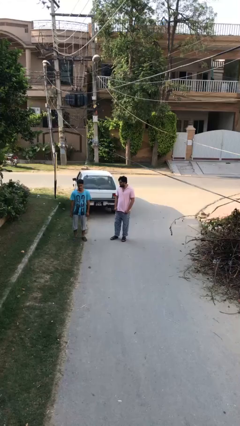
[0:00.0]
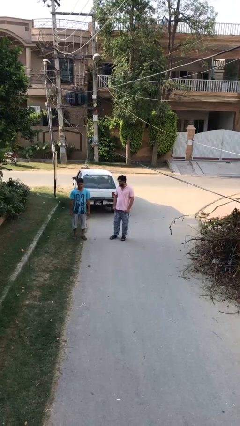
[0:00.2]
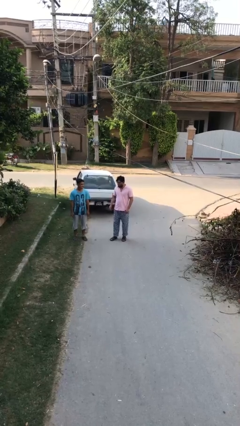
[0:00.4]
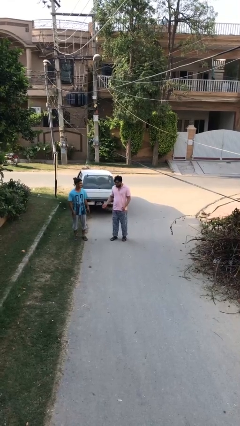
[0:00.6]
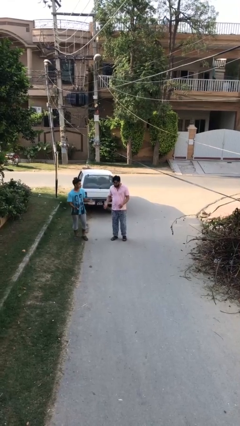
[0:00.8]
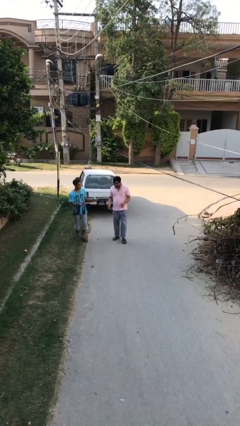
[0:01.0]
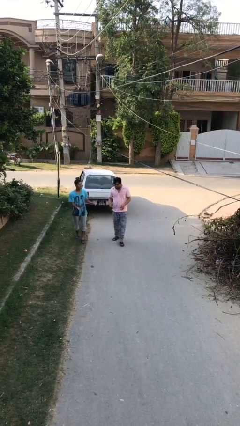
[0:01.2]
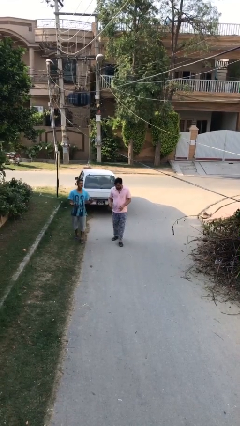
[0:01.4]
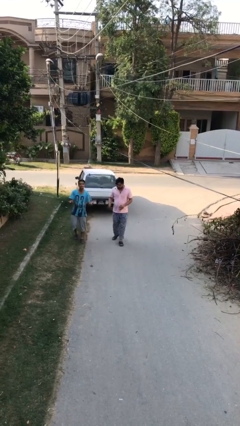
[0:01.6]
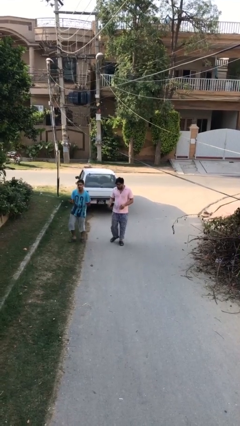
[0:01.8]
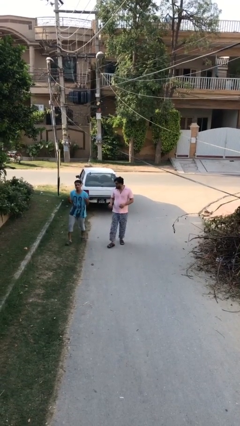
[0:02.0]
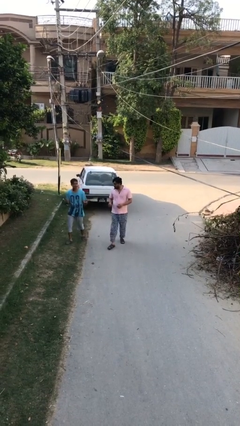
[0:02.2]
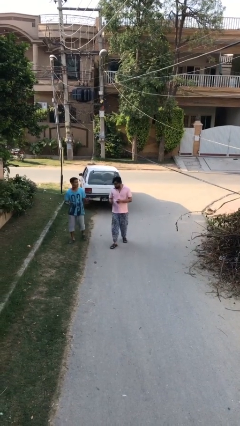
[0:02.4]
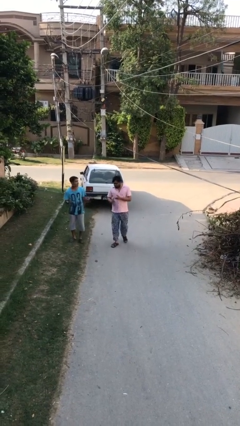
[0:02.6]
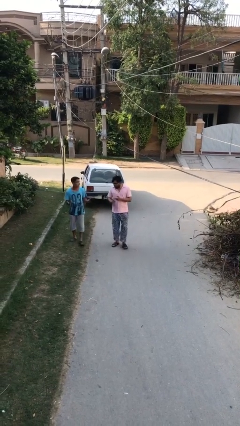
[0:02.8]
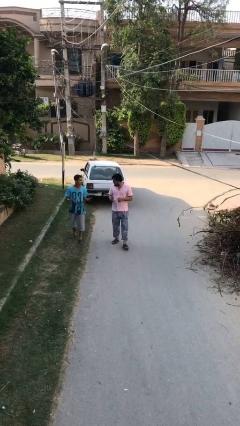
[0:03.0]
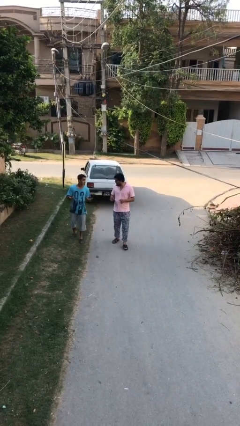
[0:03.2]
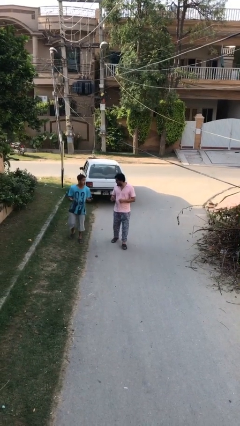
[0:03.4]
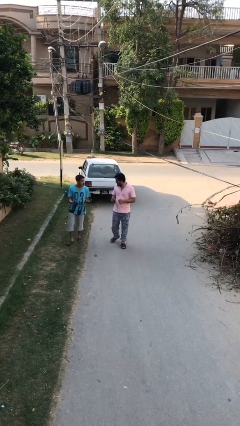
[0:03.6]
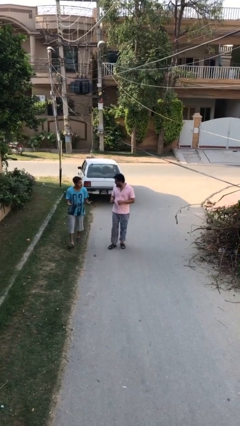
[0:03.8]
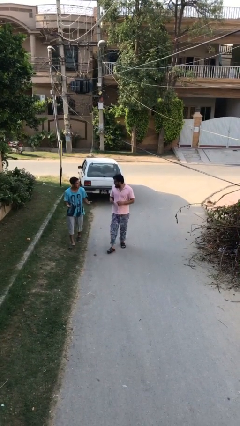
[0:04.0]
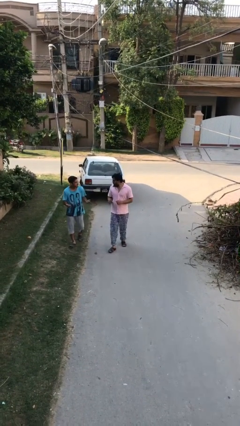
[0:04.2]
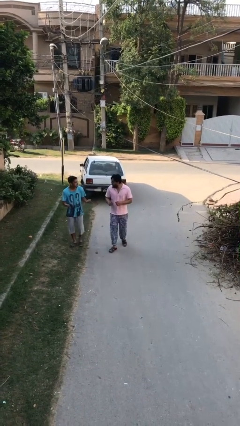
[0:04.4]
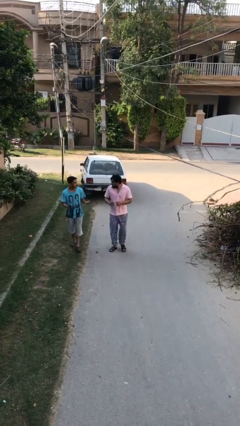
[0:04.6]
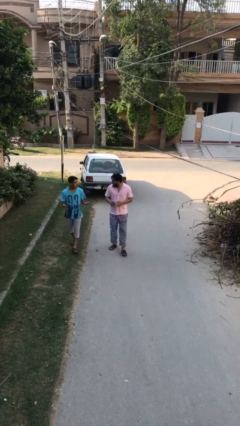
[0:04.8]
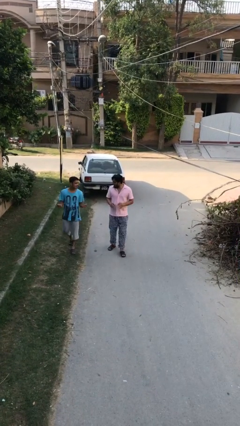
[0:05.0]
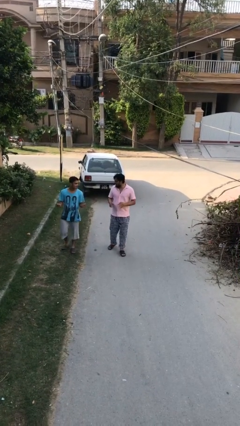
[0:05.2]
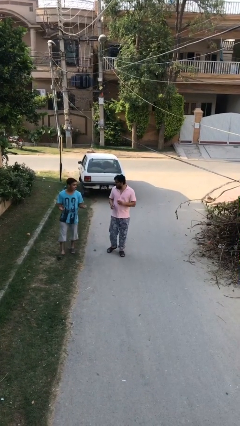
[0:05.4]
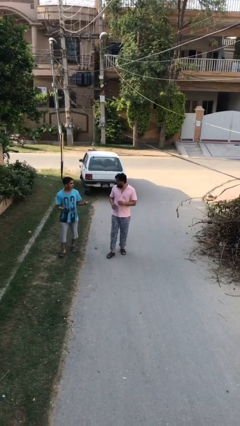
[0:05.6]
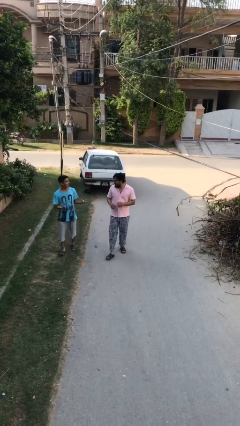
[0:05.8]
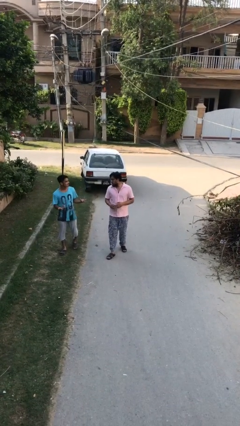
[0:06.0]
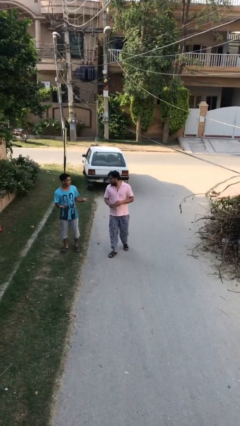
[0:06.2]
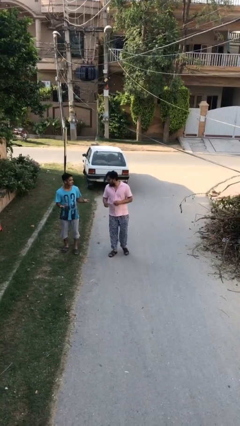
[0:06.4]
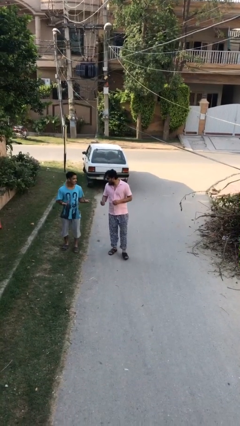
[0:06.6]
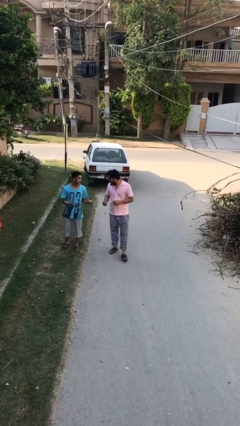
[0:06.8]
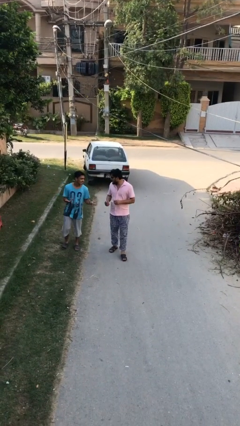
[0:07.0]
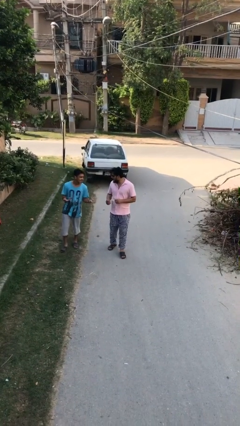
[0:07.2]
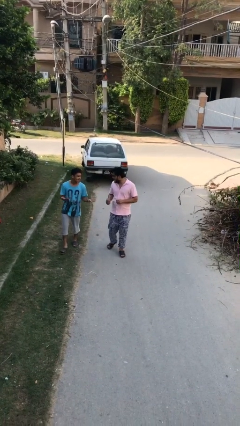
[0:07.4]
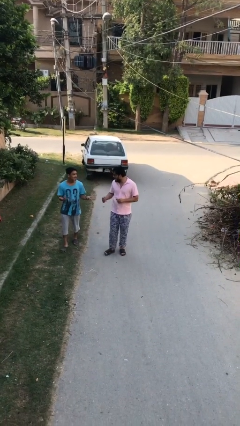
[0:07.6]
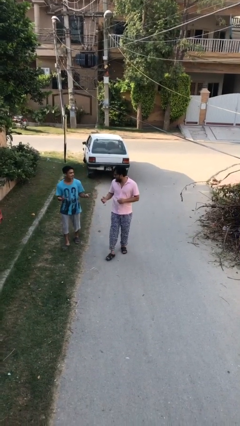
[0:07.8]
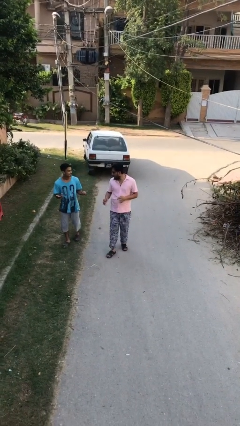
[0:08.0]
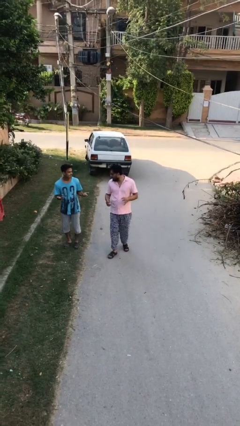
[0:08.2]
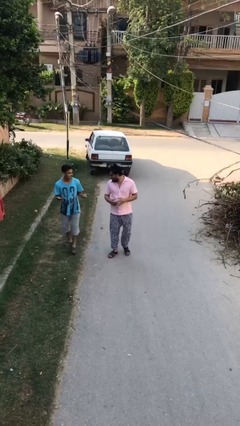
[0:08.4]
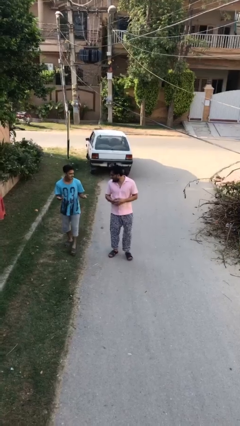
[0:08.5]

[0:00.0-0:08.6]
person talks to person

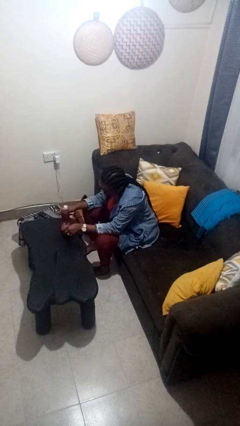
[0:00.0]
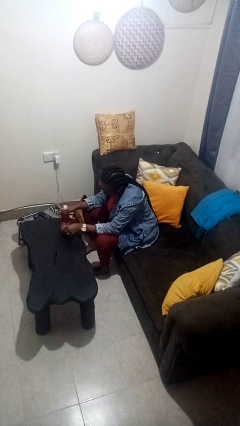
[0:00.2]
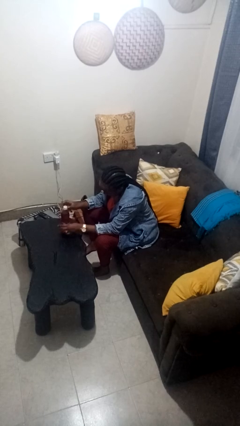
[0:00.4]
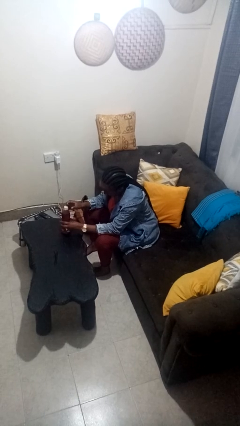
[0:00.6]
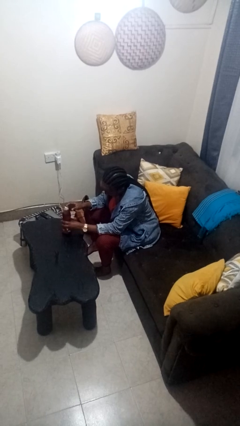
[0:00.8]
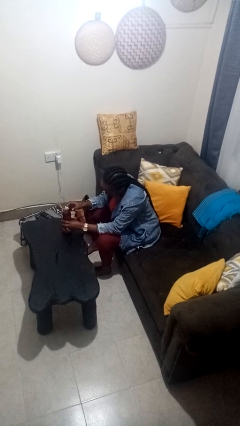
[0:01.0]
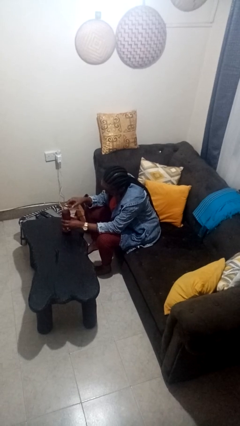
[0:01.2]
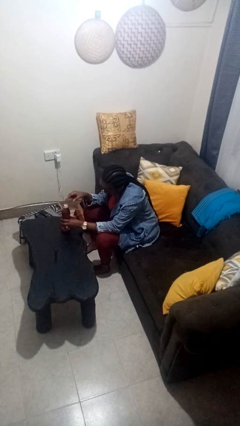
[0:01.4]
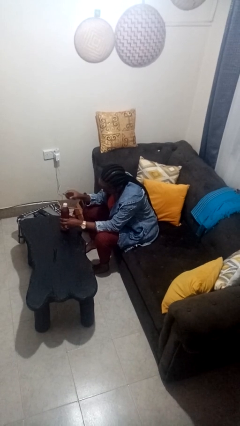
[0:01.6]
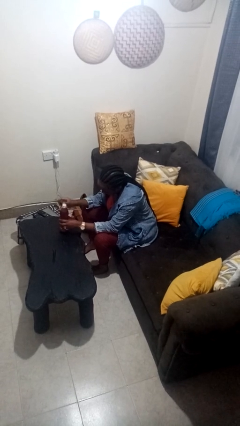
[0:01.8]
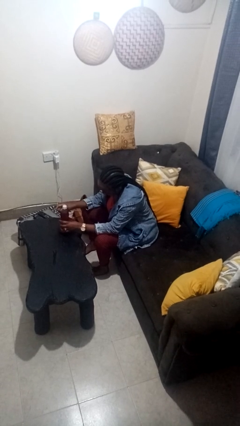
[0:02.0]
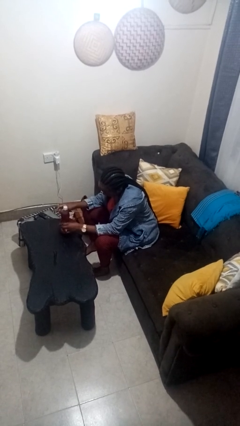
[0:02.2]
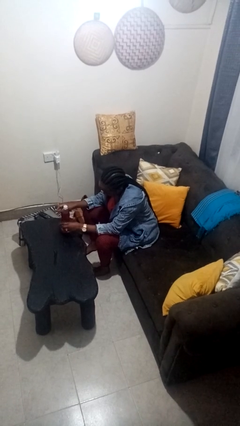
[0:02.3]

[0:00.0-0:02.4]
person opens can with can opener

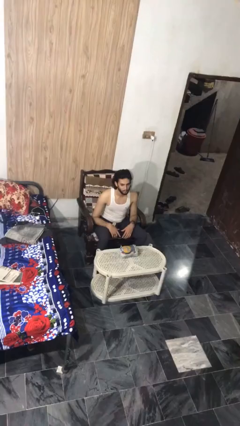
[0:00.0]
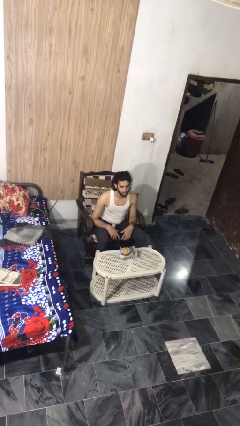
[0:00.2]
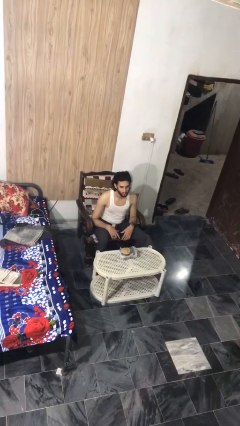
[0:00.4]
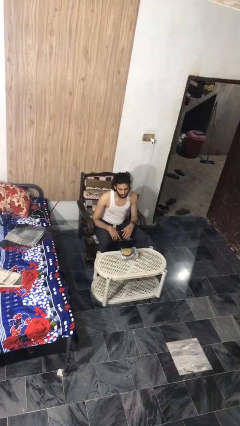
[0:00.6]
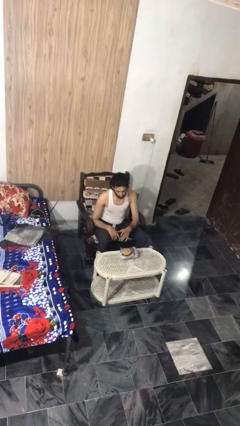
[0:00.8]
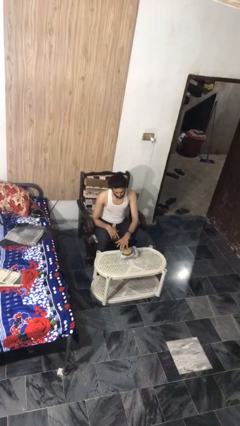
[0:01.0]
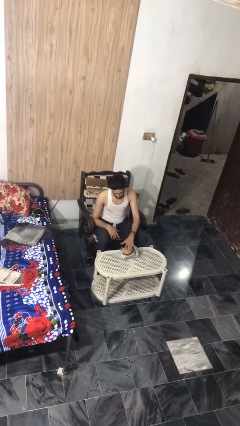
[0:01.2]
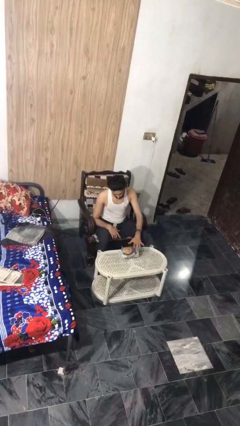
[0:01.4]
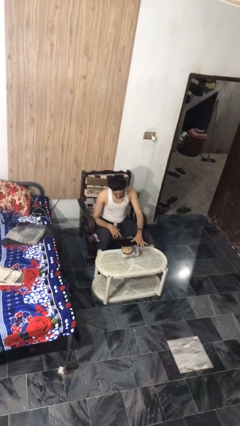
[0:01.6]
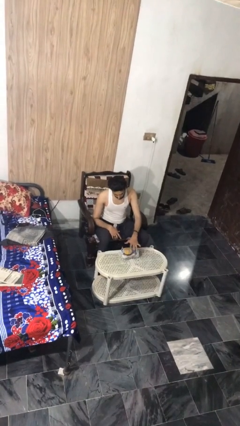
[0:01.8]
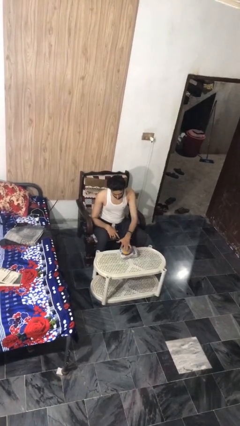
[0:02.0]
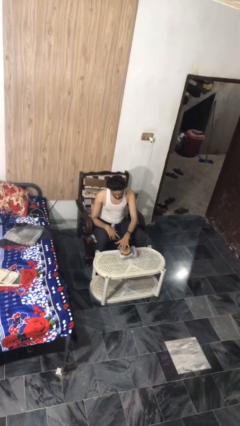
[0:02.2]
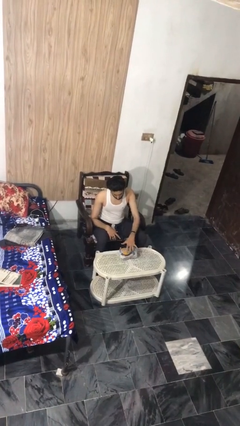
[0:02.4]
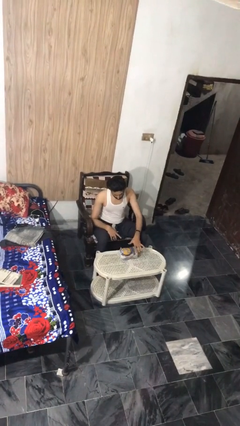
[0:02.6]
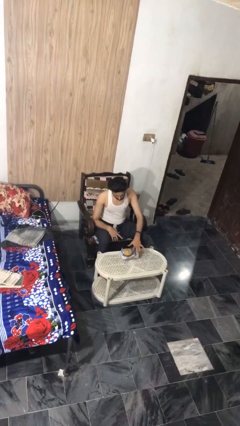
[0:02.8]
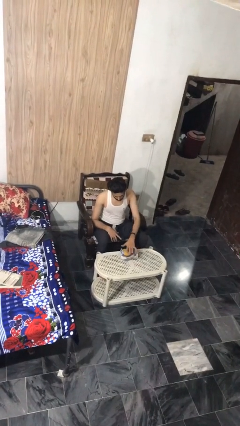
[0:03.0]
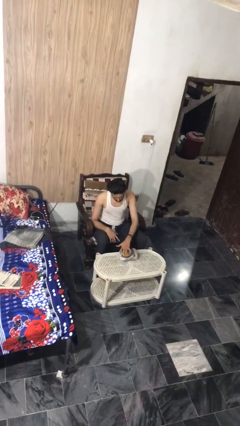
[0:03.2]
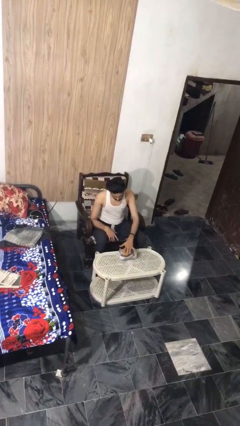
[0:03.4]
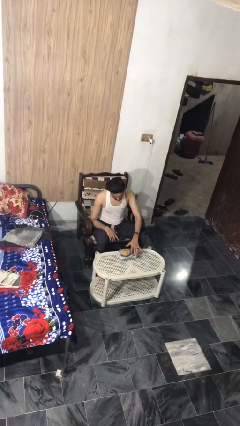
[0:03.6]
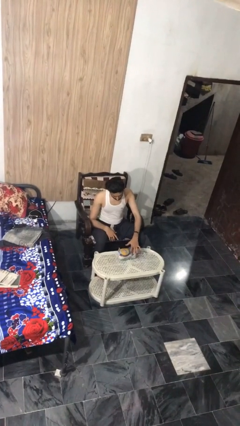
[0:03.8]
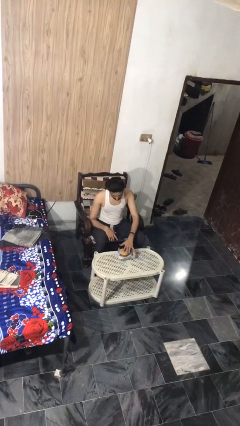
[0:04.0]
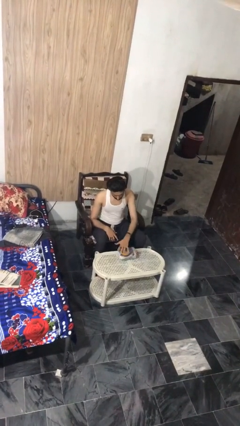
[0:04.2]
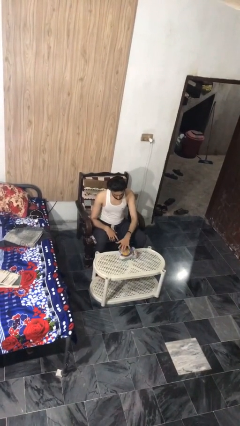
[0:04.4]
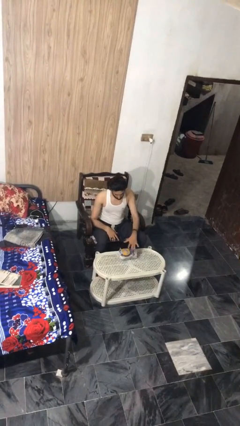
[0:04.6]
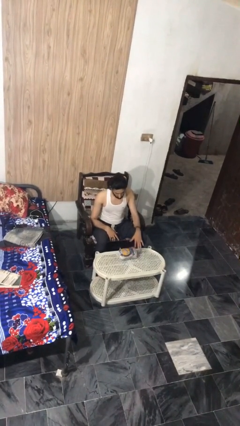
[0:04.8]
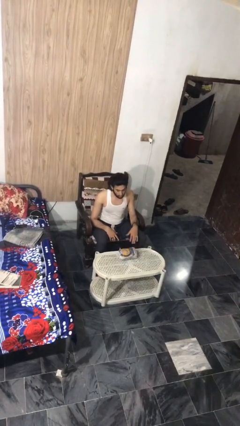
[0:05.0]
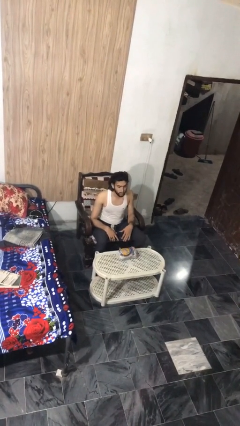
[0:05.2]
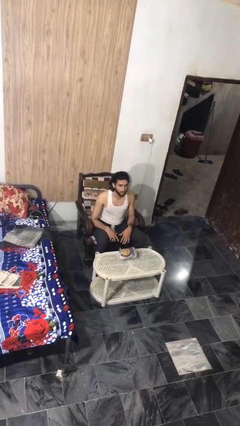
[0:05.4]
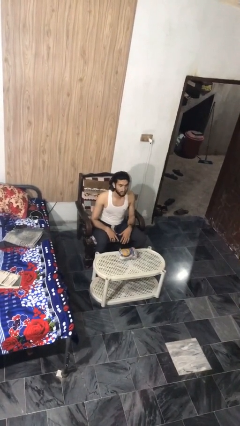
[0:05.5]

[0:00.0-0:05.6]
person waves hand over object

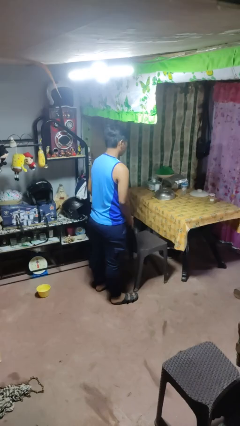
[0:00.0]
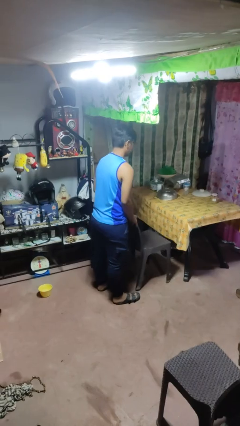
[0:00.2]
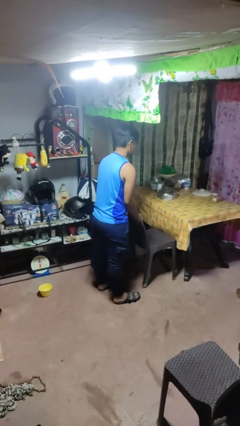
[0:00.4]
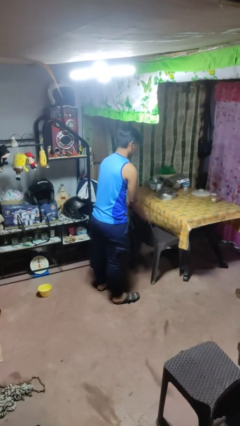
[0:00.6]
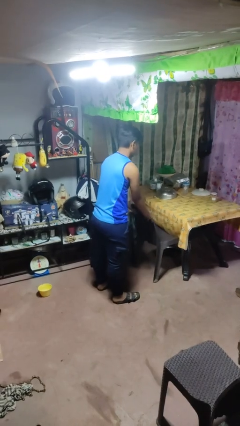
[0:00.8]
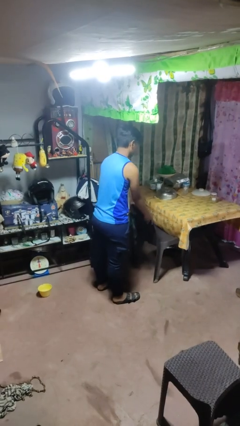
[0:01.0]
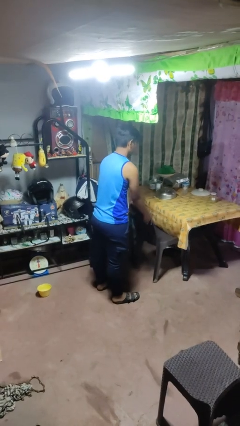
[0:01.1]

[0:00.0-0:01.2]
person pushes in chair
